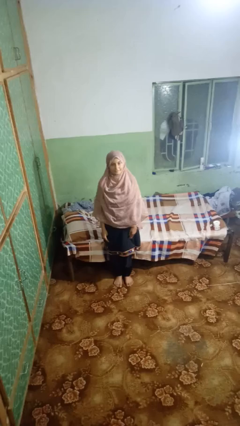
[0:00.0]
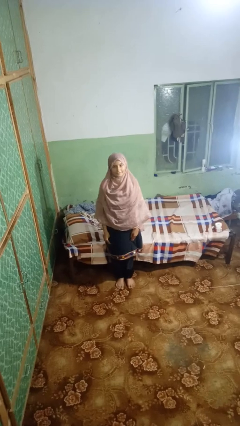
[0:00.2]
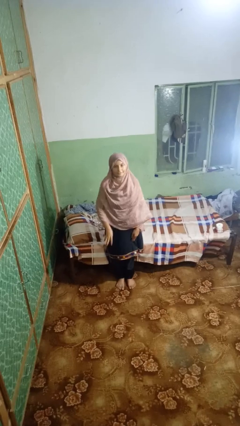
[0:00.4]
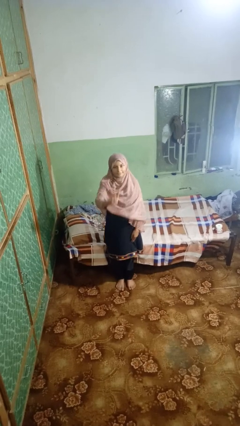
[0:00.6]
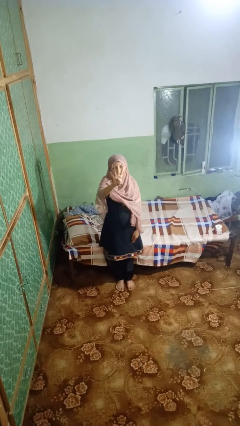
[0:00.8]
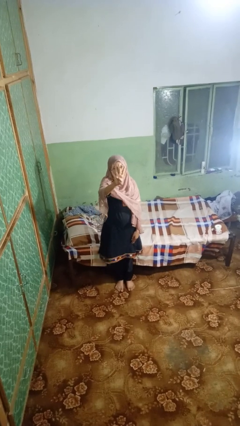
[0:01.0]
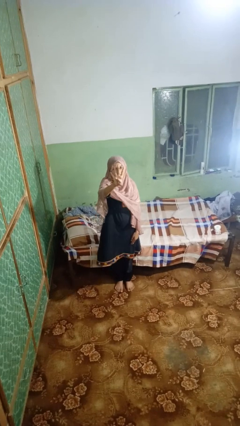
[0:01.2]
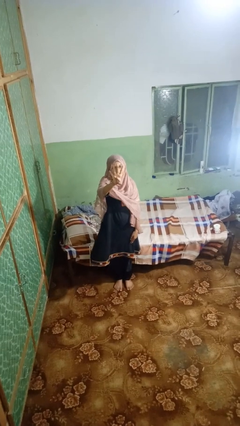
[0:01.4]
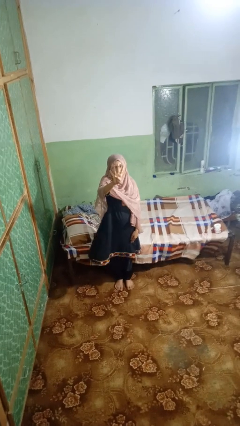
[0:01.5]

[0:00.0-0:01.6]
person gestures number four

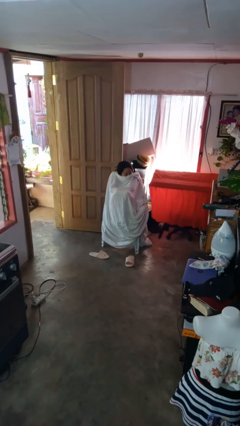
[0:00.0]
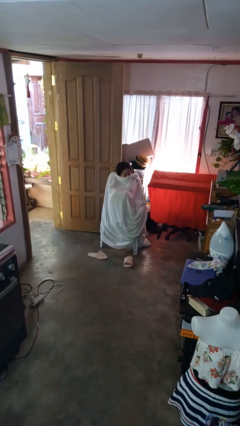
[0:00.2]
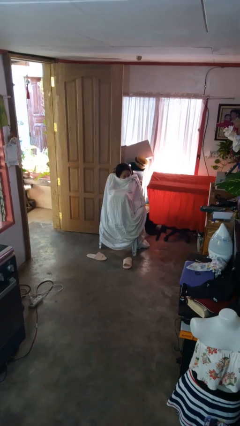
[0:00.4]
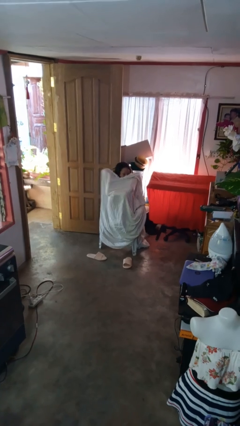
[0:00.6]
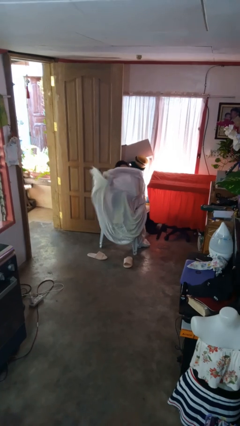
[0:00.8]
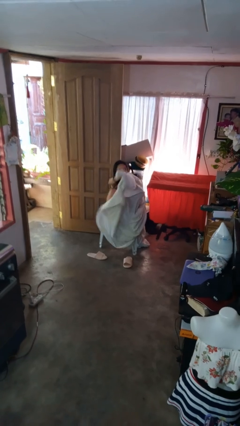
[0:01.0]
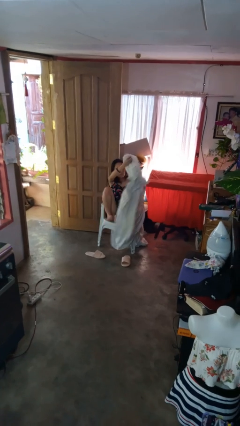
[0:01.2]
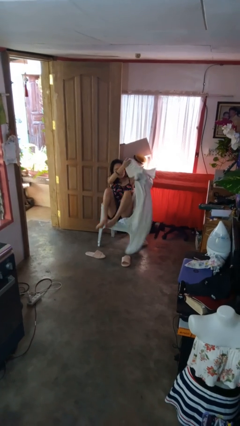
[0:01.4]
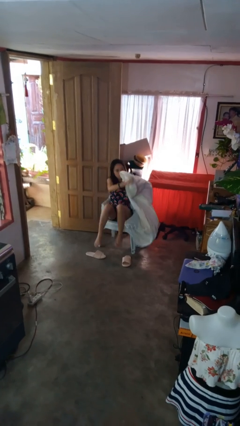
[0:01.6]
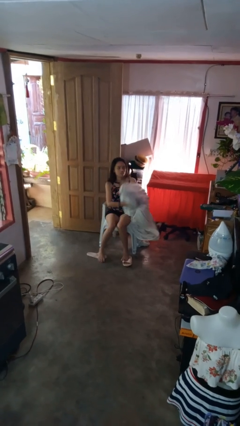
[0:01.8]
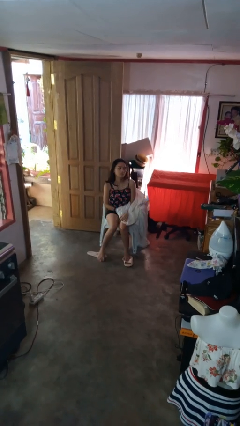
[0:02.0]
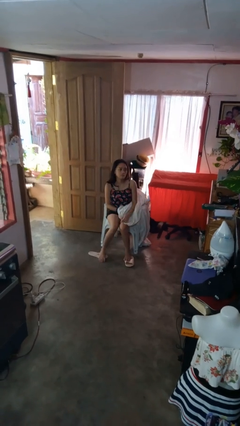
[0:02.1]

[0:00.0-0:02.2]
person uncovers with blanket

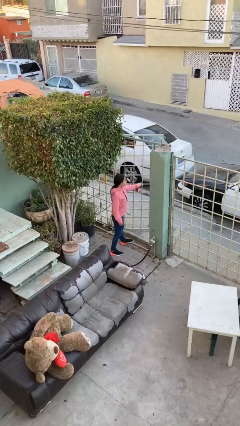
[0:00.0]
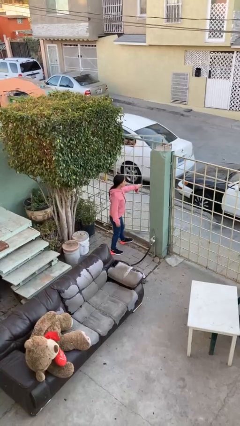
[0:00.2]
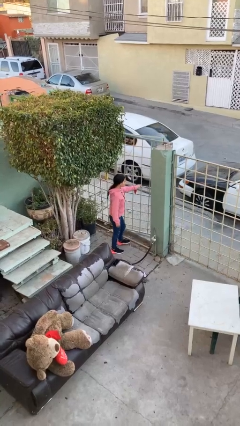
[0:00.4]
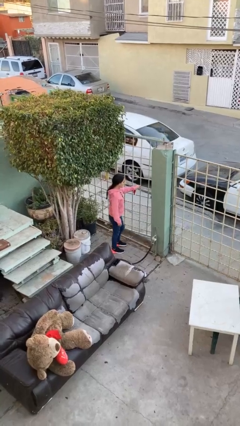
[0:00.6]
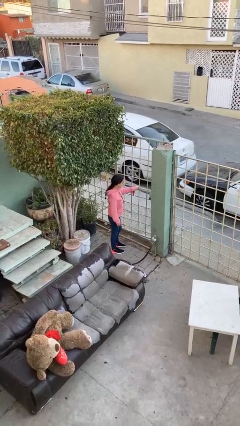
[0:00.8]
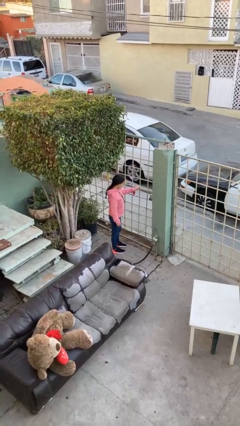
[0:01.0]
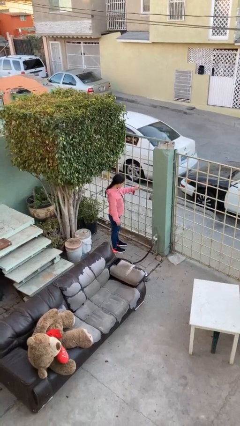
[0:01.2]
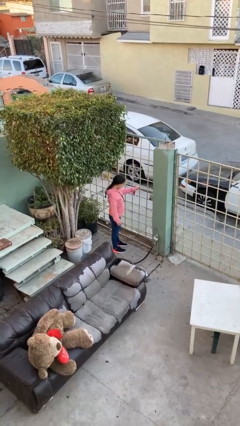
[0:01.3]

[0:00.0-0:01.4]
person closes facility door

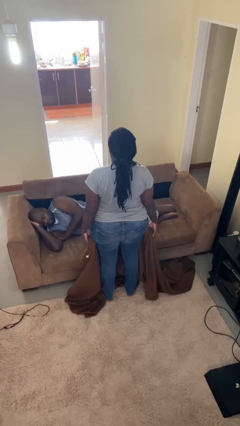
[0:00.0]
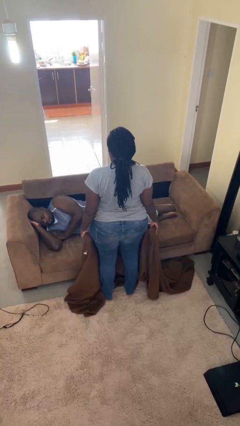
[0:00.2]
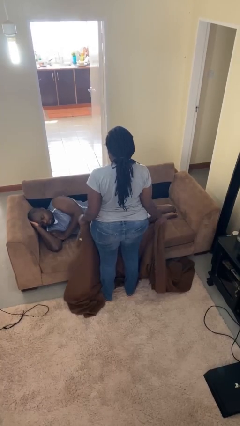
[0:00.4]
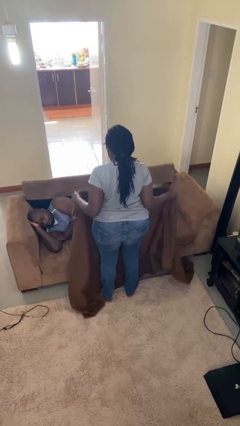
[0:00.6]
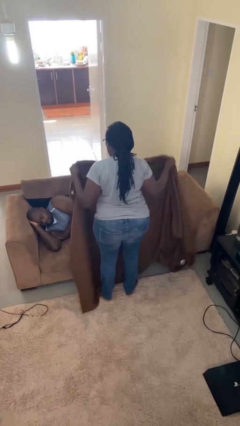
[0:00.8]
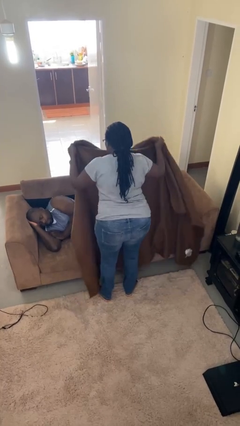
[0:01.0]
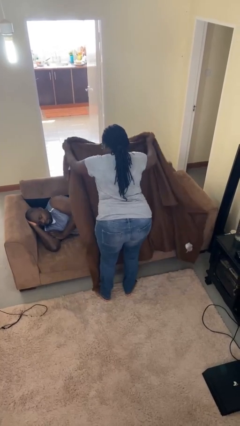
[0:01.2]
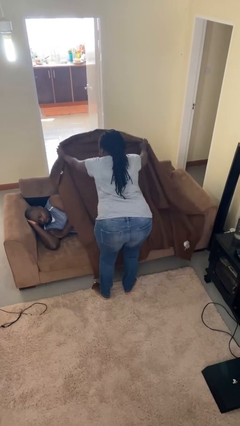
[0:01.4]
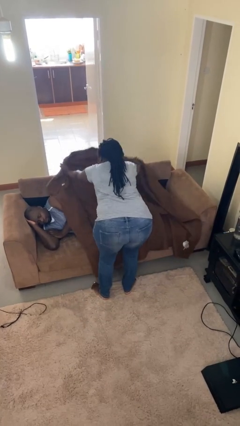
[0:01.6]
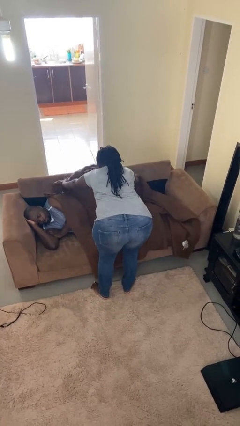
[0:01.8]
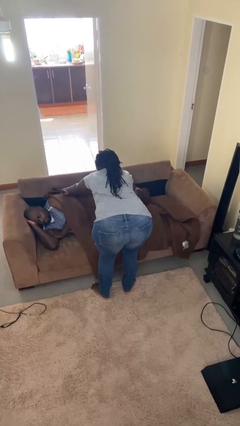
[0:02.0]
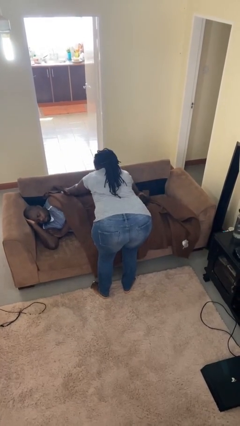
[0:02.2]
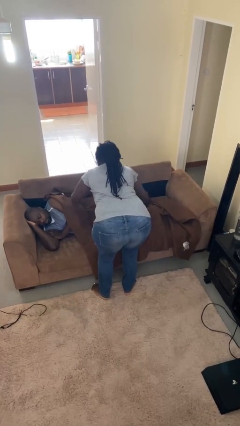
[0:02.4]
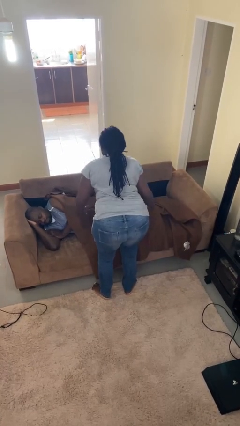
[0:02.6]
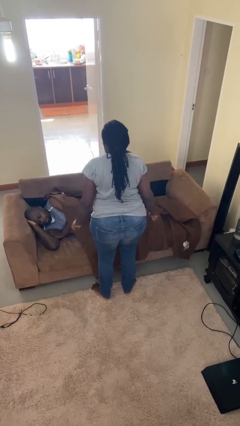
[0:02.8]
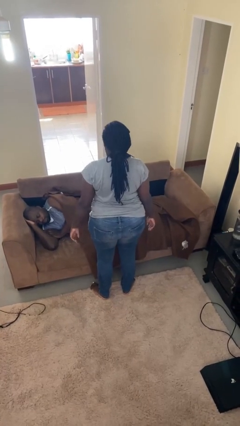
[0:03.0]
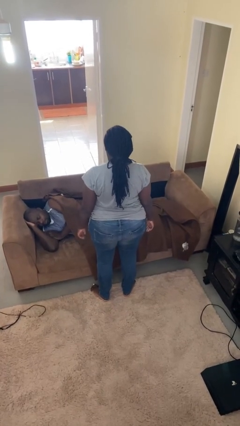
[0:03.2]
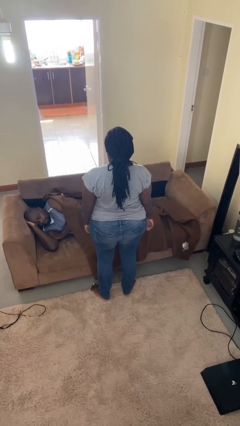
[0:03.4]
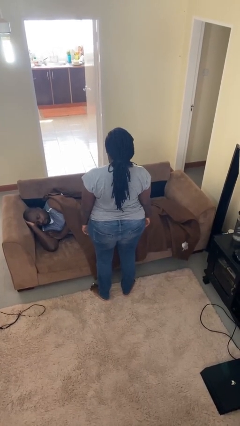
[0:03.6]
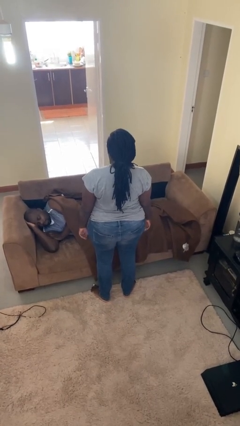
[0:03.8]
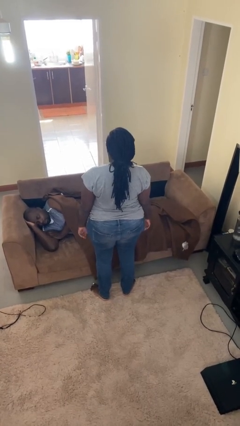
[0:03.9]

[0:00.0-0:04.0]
person covers friend with blanket

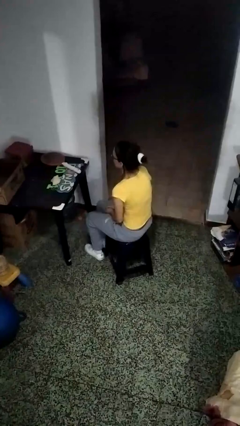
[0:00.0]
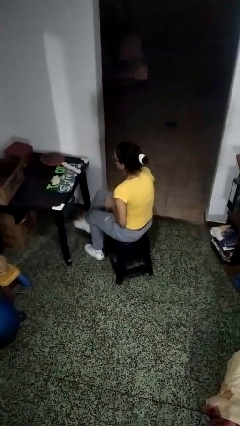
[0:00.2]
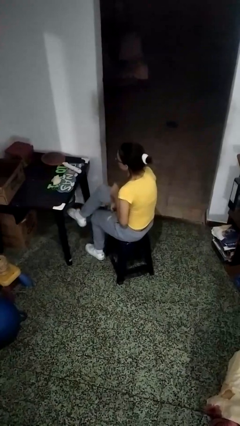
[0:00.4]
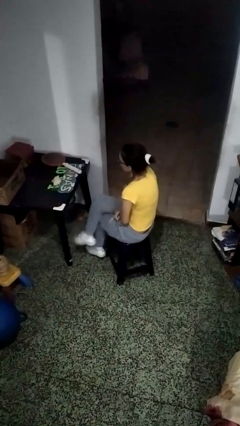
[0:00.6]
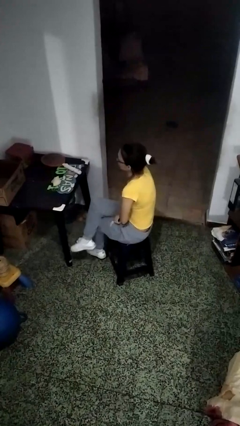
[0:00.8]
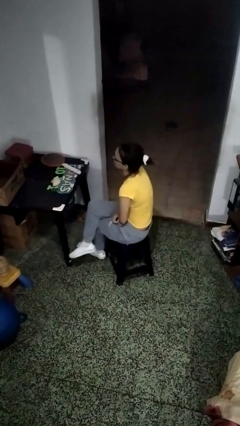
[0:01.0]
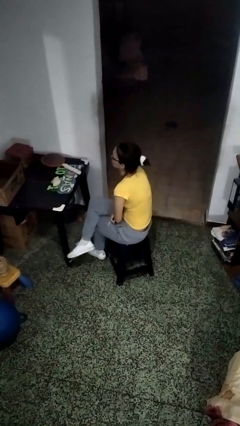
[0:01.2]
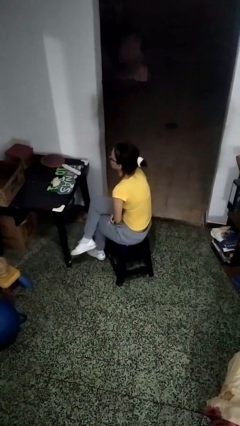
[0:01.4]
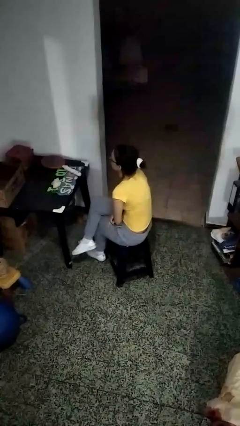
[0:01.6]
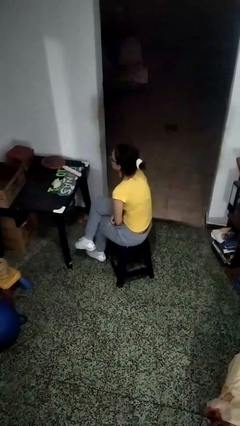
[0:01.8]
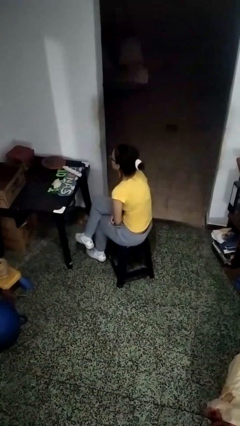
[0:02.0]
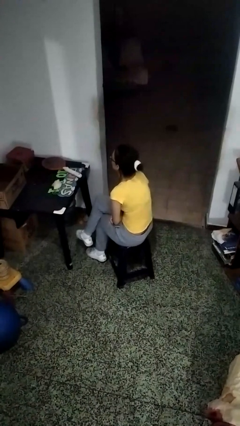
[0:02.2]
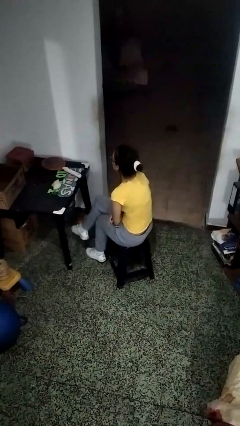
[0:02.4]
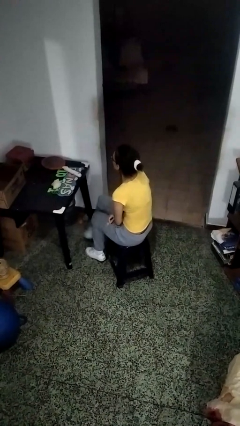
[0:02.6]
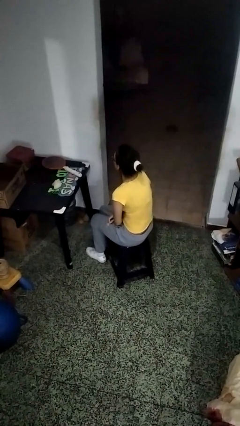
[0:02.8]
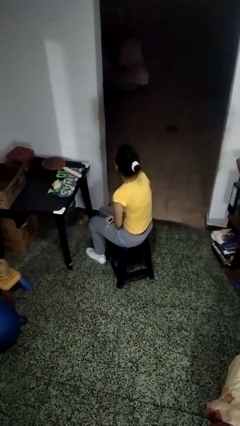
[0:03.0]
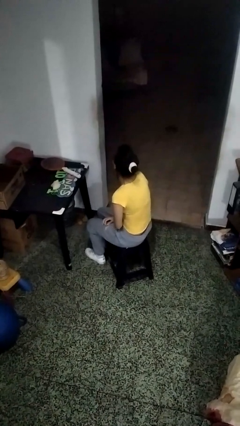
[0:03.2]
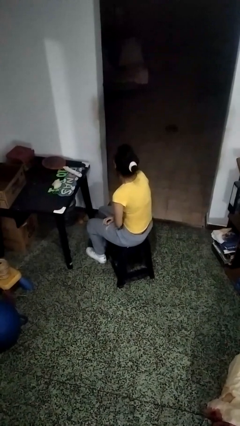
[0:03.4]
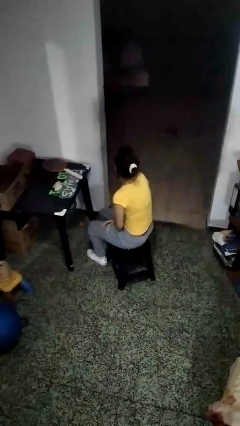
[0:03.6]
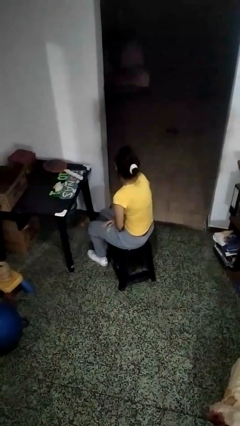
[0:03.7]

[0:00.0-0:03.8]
person crosses legs

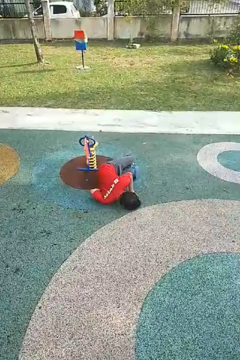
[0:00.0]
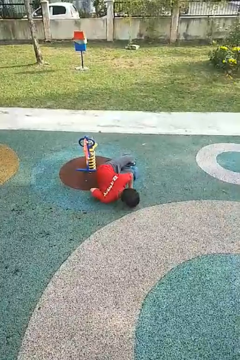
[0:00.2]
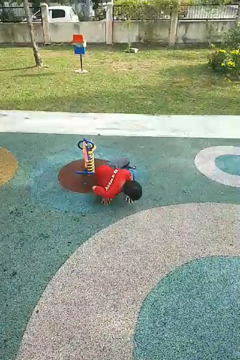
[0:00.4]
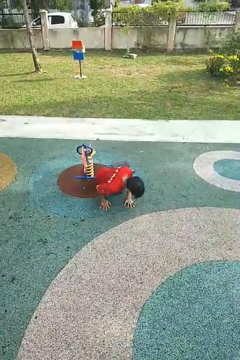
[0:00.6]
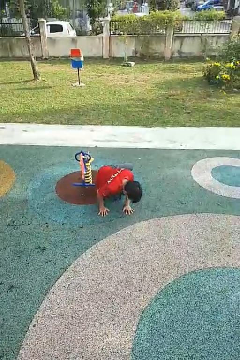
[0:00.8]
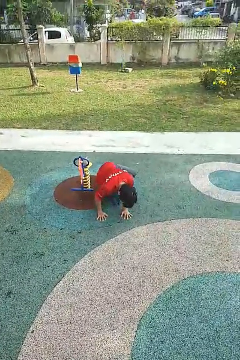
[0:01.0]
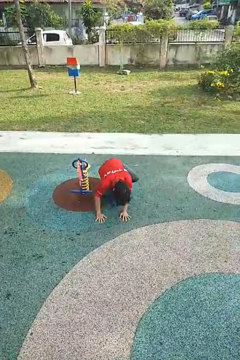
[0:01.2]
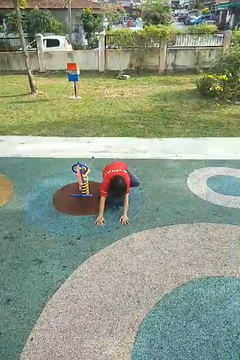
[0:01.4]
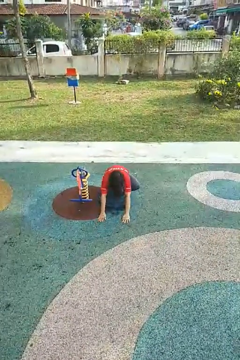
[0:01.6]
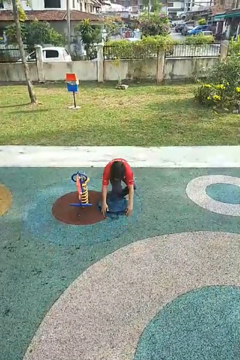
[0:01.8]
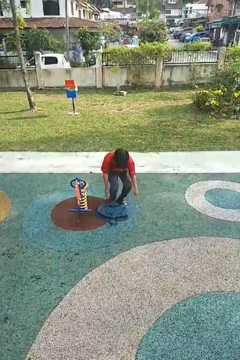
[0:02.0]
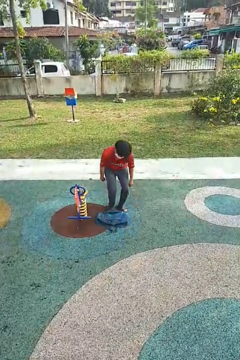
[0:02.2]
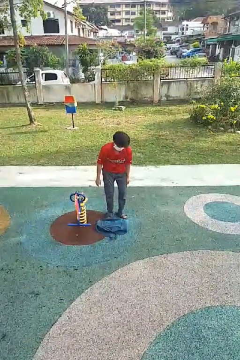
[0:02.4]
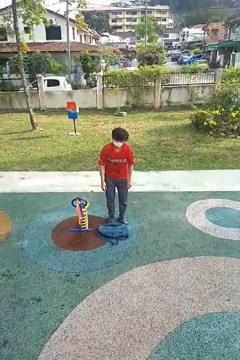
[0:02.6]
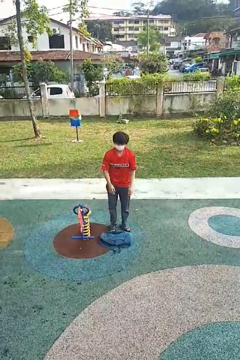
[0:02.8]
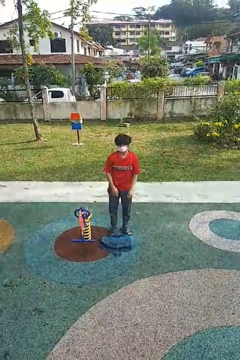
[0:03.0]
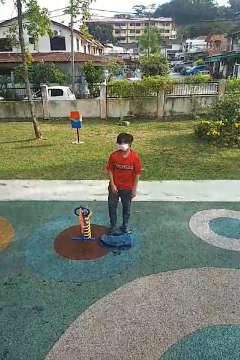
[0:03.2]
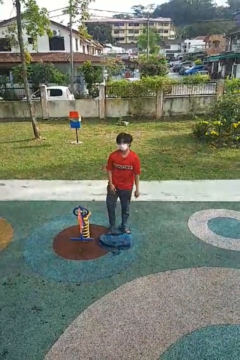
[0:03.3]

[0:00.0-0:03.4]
person stands up from floor

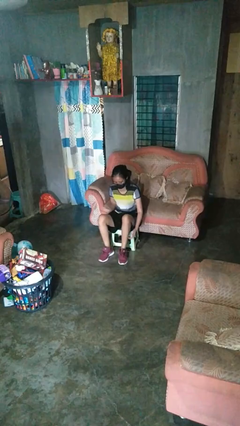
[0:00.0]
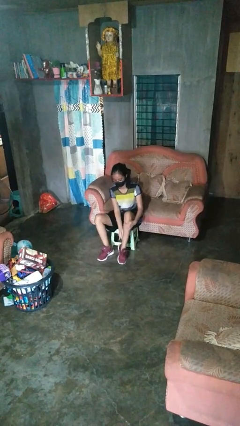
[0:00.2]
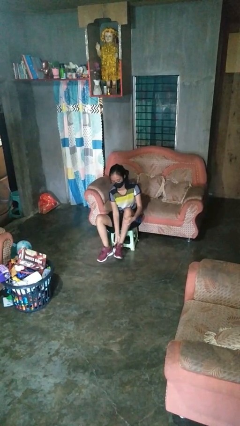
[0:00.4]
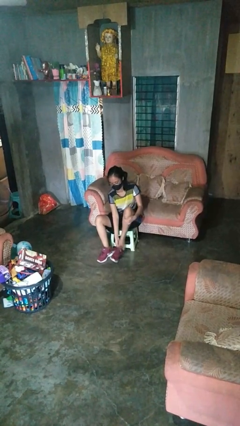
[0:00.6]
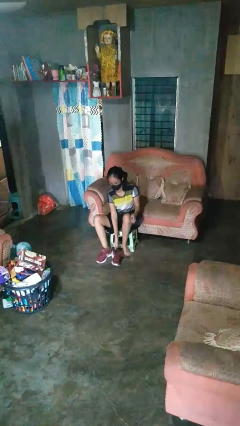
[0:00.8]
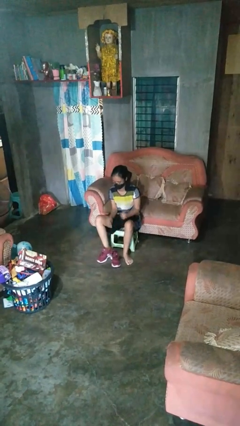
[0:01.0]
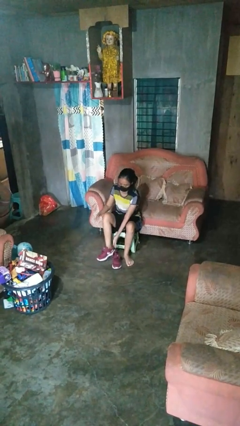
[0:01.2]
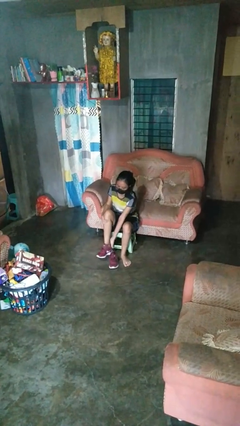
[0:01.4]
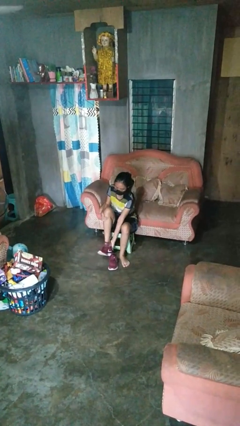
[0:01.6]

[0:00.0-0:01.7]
person takes off shoes
